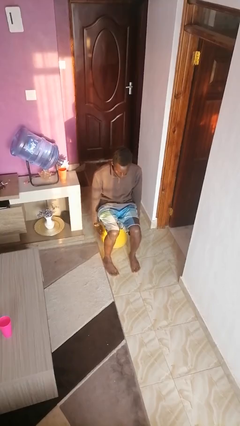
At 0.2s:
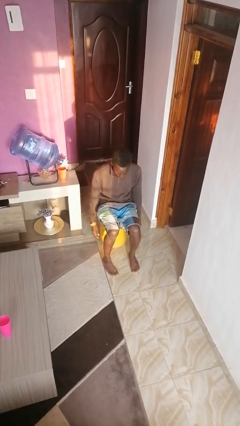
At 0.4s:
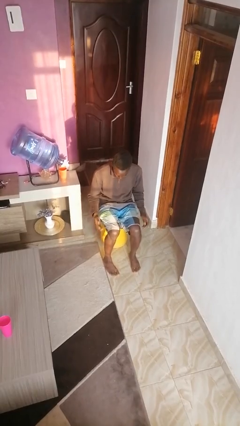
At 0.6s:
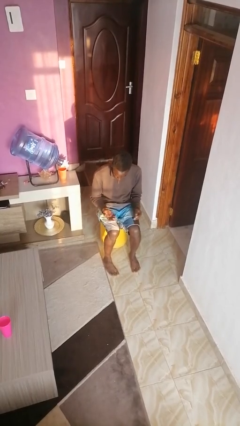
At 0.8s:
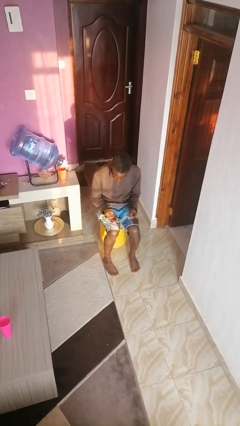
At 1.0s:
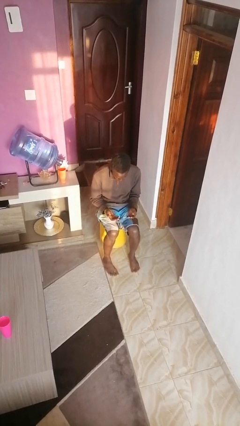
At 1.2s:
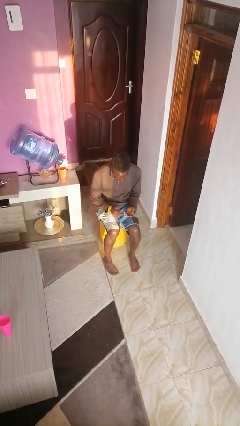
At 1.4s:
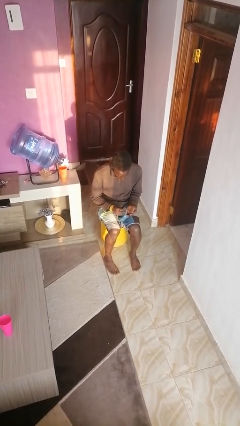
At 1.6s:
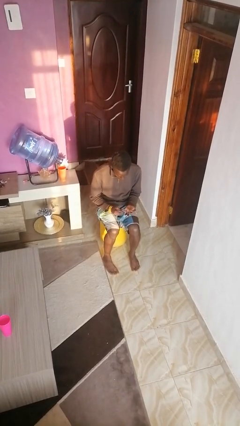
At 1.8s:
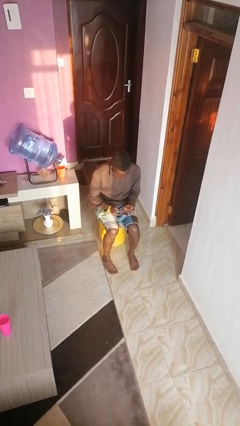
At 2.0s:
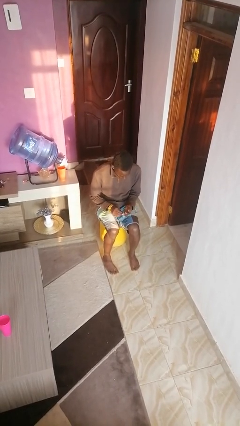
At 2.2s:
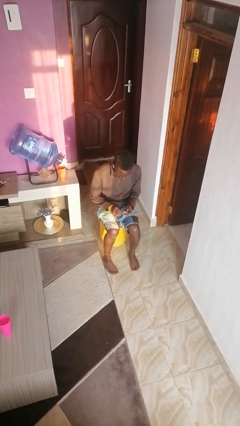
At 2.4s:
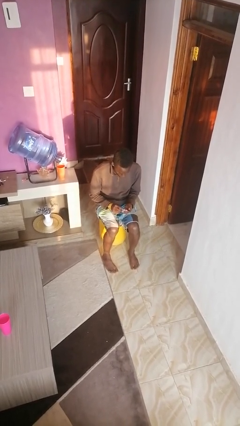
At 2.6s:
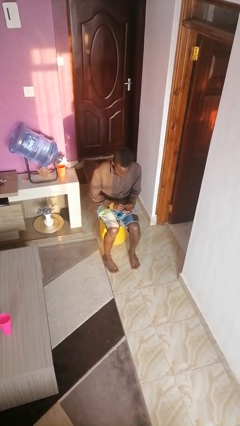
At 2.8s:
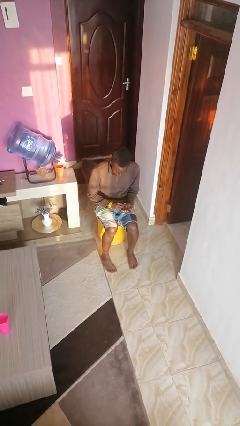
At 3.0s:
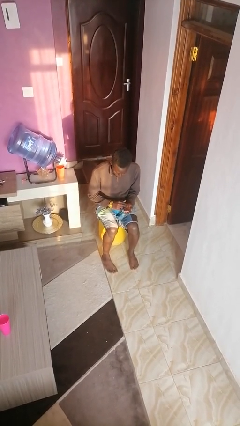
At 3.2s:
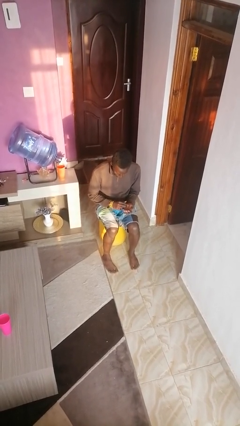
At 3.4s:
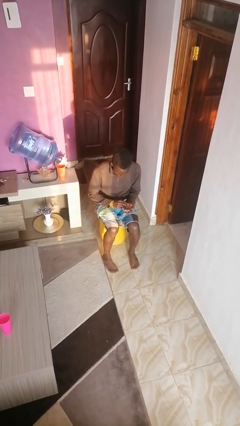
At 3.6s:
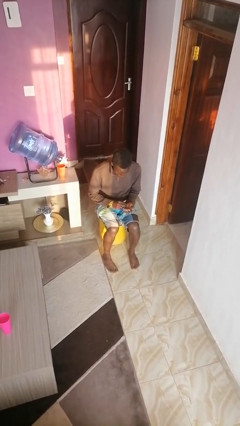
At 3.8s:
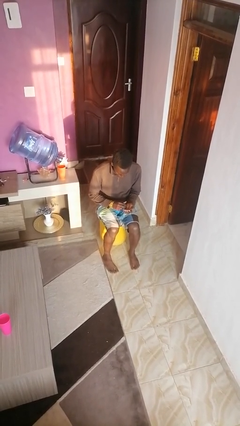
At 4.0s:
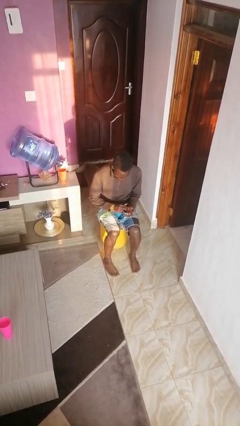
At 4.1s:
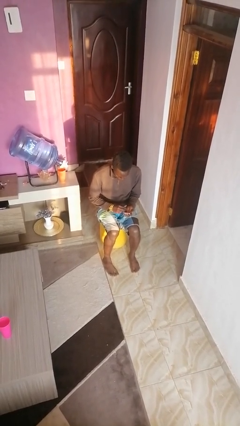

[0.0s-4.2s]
person looks at hands in lap

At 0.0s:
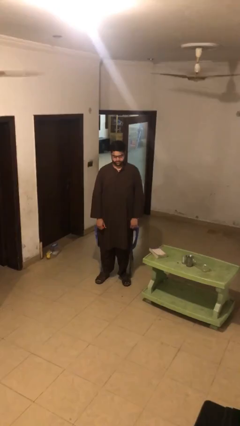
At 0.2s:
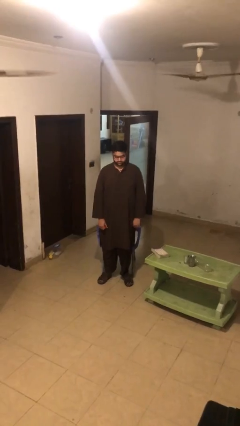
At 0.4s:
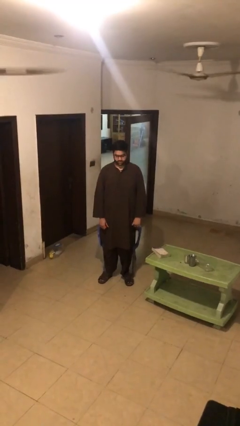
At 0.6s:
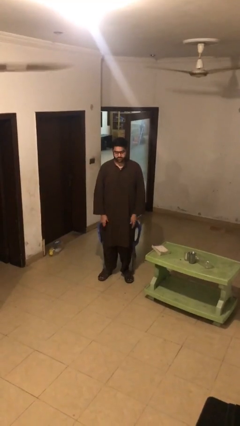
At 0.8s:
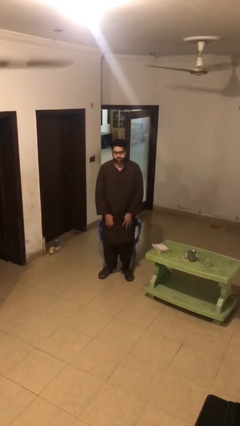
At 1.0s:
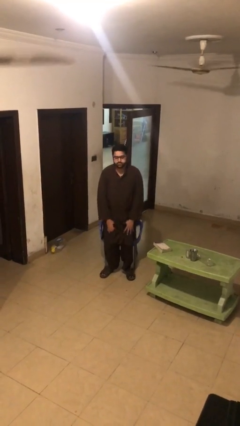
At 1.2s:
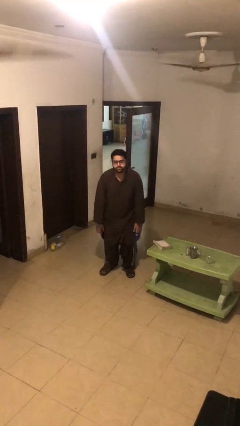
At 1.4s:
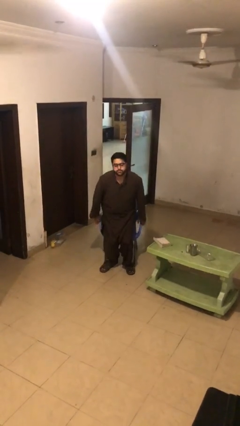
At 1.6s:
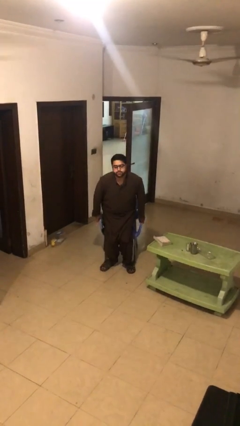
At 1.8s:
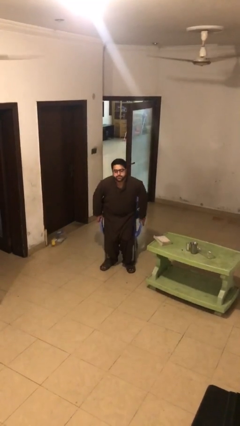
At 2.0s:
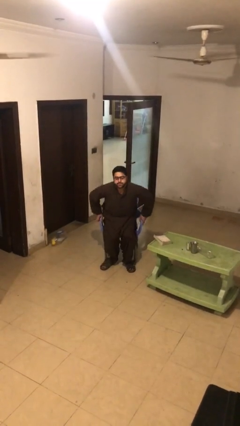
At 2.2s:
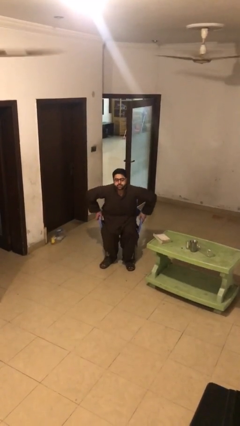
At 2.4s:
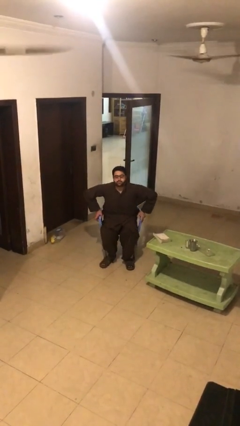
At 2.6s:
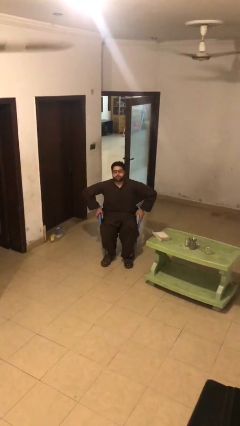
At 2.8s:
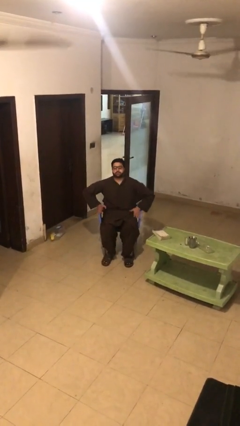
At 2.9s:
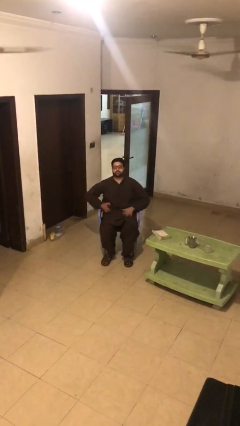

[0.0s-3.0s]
person sits down

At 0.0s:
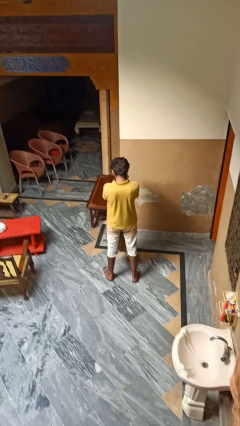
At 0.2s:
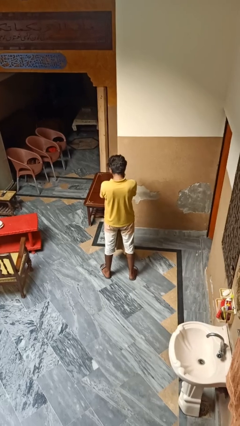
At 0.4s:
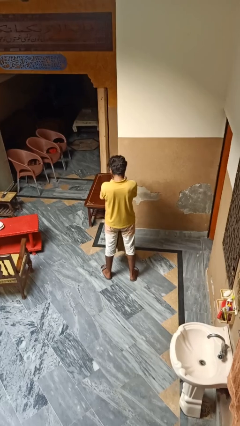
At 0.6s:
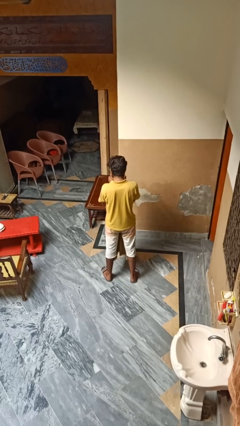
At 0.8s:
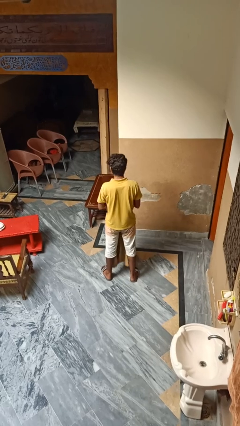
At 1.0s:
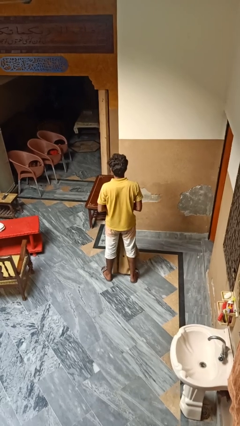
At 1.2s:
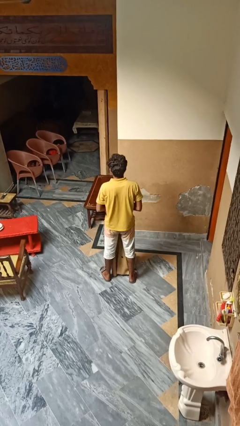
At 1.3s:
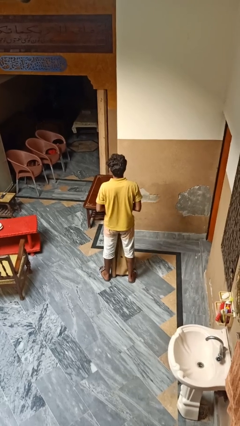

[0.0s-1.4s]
person unfolds blanket

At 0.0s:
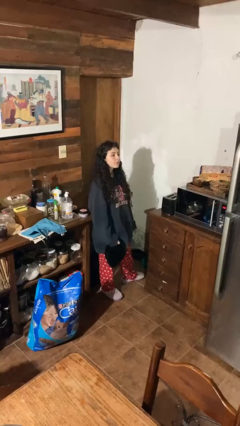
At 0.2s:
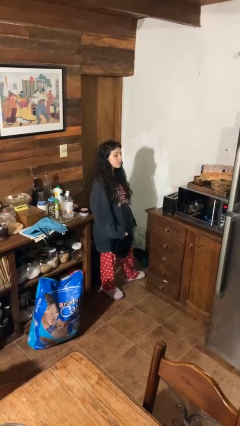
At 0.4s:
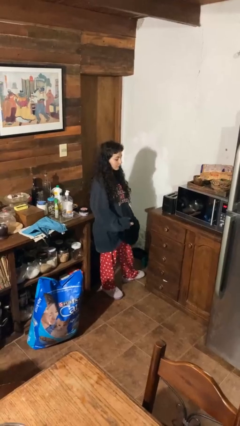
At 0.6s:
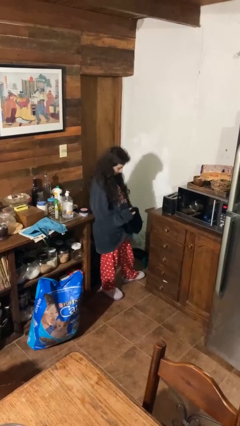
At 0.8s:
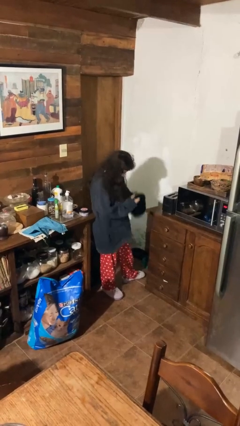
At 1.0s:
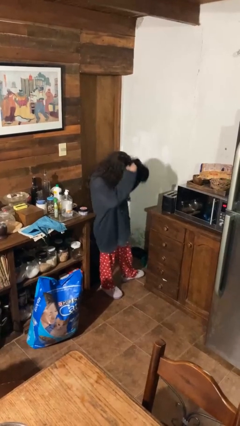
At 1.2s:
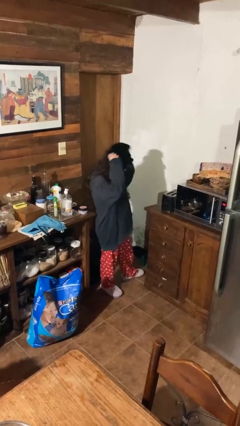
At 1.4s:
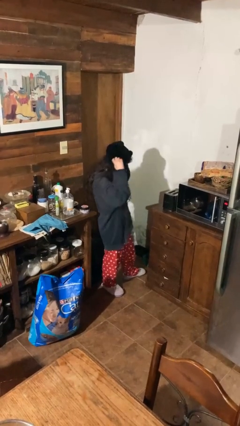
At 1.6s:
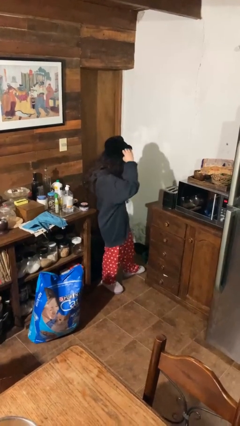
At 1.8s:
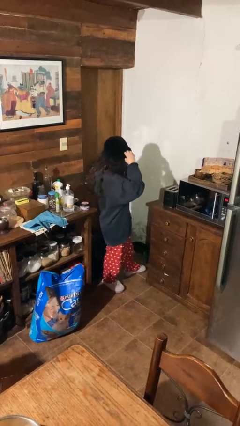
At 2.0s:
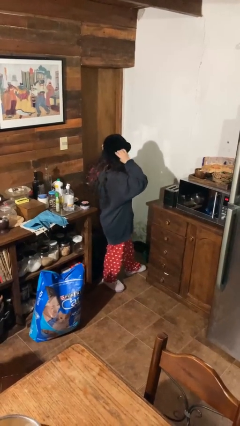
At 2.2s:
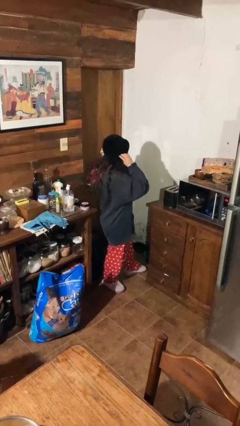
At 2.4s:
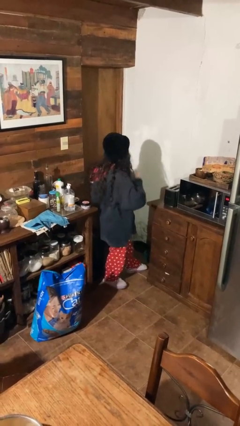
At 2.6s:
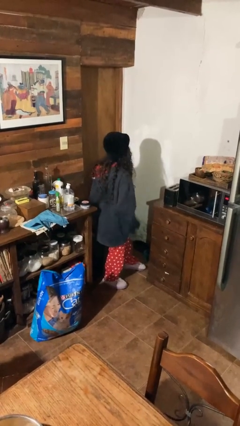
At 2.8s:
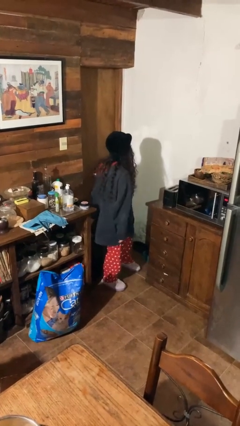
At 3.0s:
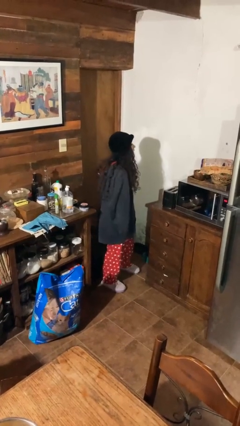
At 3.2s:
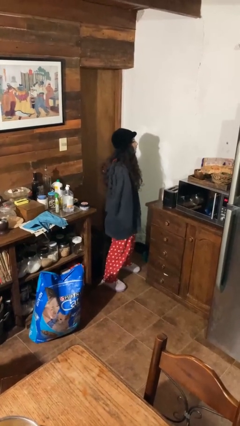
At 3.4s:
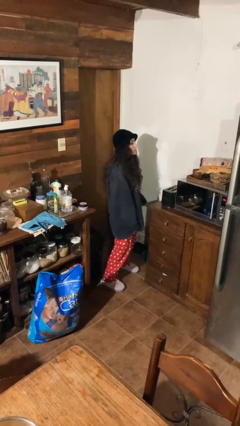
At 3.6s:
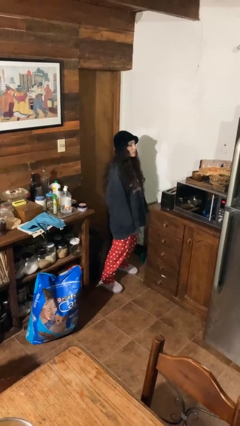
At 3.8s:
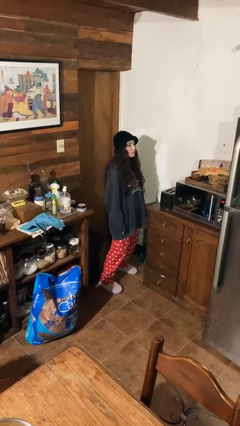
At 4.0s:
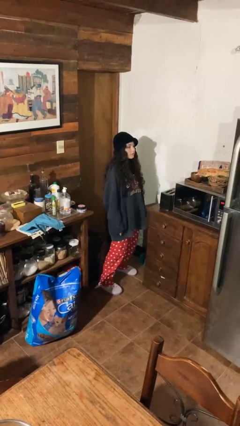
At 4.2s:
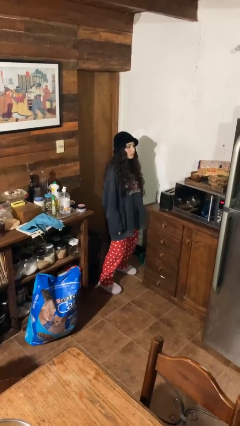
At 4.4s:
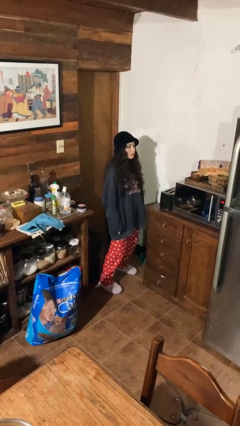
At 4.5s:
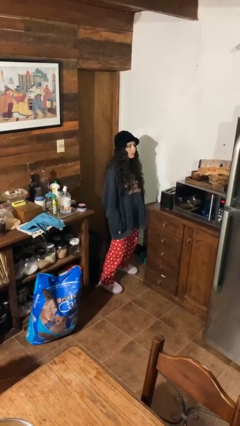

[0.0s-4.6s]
person puts on hat

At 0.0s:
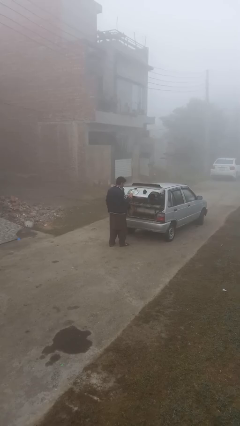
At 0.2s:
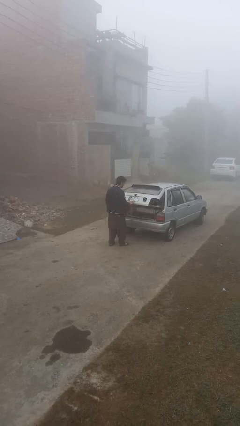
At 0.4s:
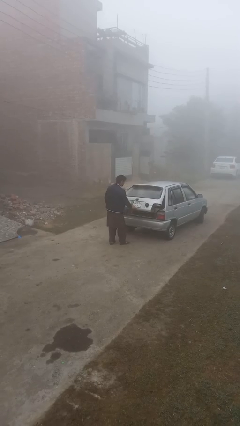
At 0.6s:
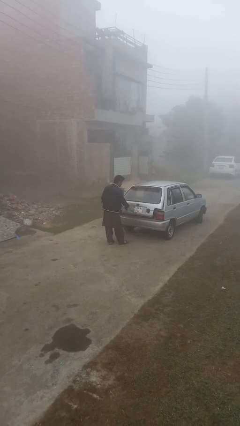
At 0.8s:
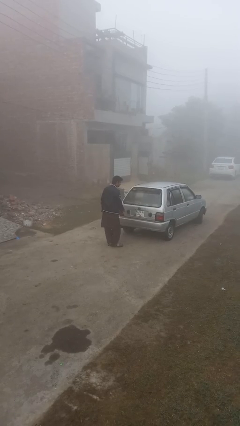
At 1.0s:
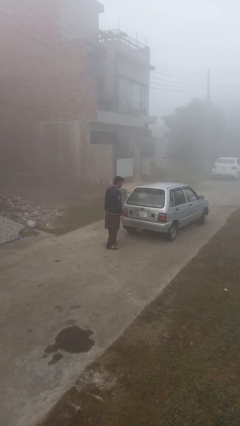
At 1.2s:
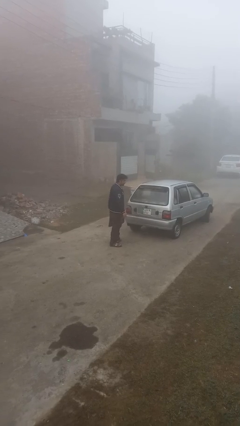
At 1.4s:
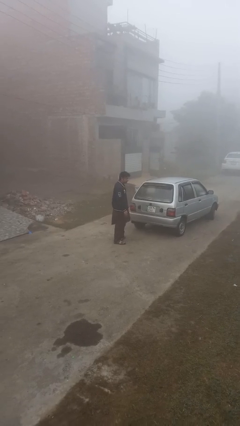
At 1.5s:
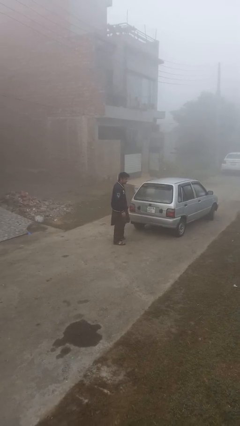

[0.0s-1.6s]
person closes car trunk

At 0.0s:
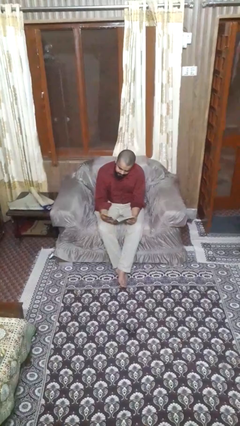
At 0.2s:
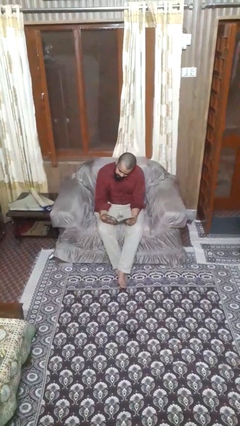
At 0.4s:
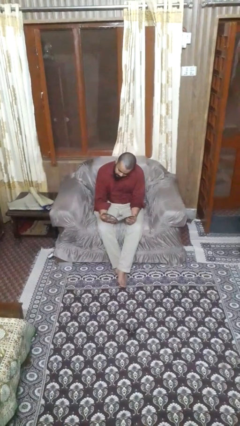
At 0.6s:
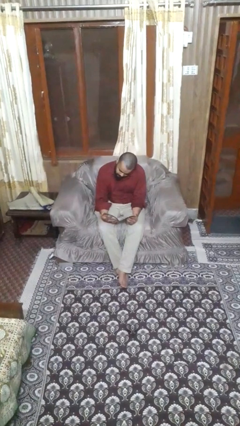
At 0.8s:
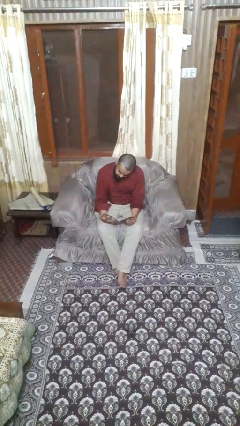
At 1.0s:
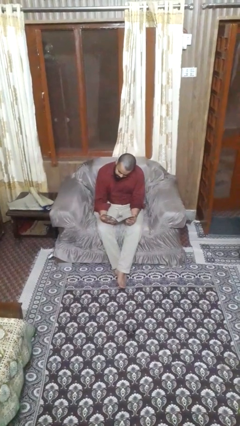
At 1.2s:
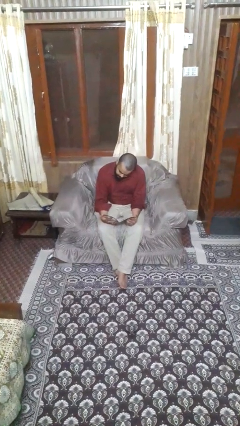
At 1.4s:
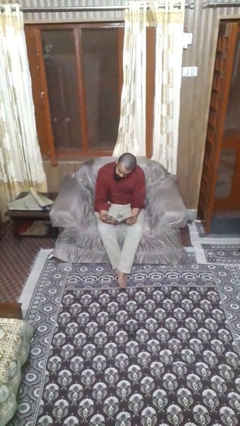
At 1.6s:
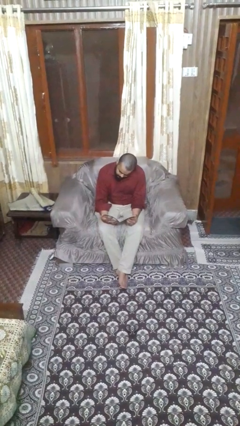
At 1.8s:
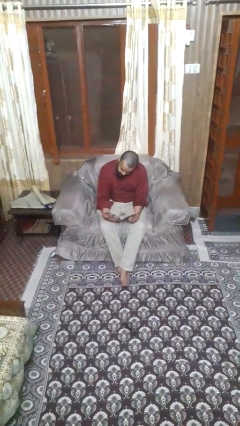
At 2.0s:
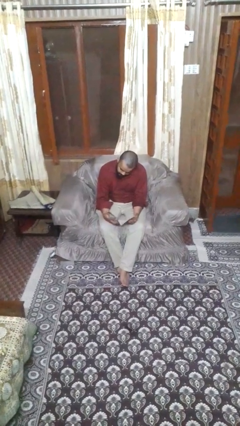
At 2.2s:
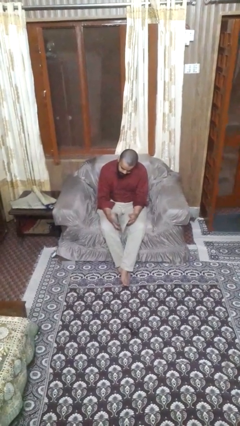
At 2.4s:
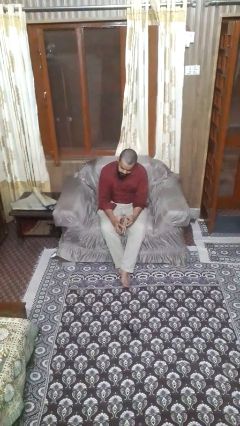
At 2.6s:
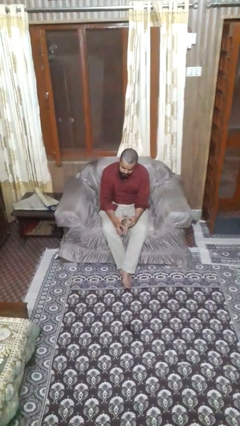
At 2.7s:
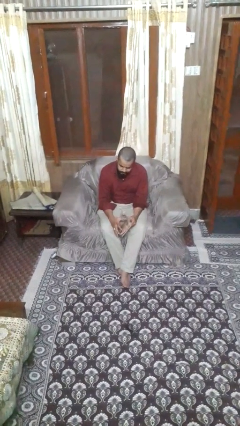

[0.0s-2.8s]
person reads magazine

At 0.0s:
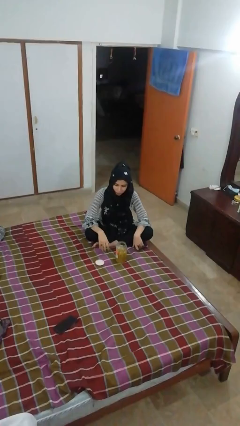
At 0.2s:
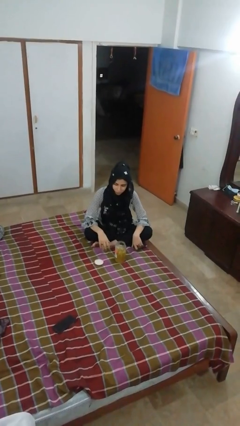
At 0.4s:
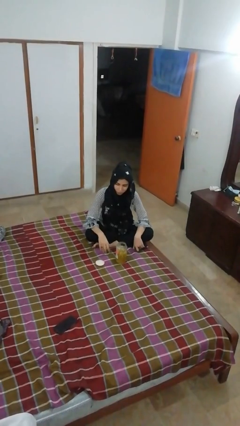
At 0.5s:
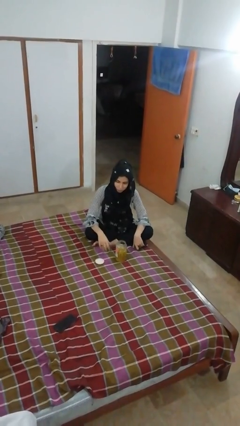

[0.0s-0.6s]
person licks fingers
